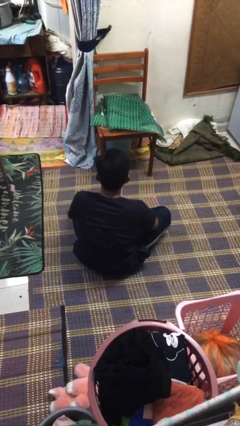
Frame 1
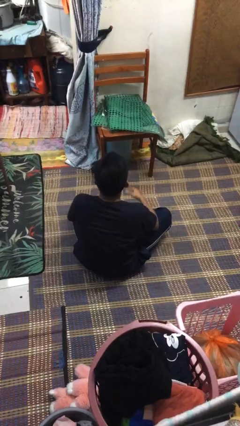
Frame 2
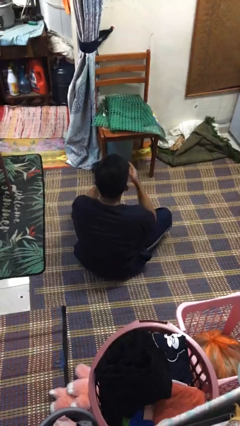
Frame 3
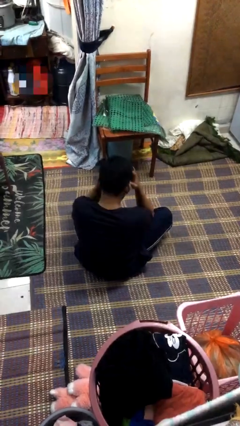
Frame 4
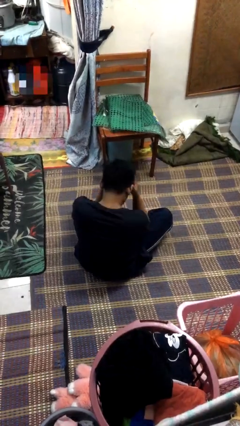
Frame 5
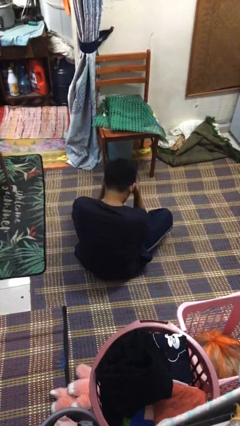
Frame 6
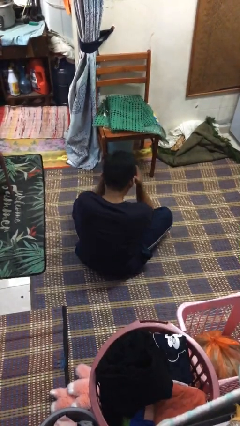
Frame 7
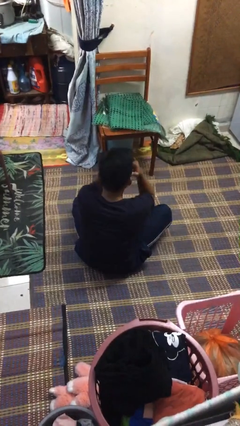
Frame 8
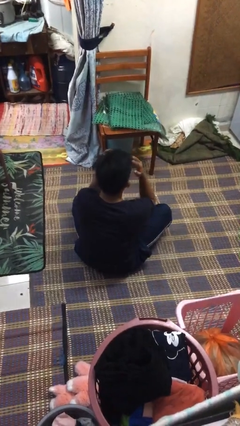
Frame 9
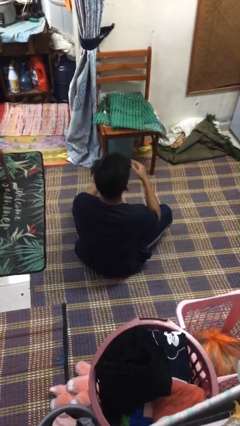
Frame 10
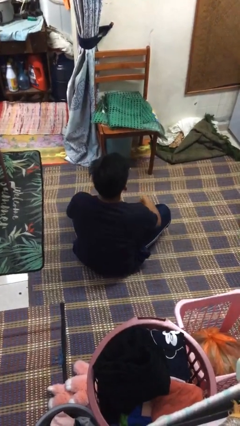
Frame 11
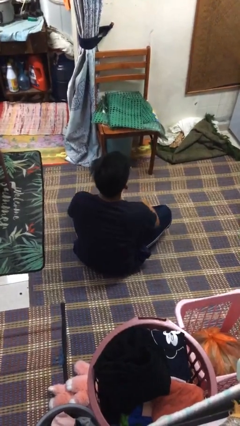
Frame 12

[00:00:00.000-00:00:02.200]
person covers face with hands

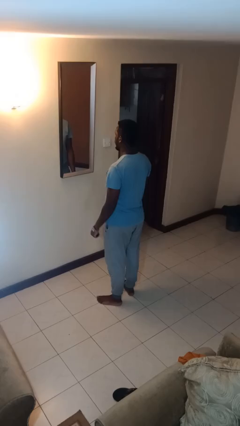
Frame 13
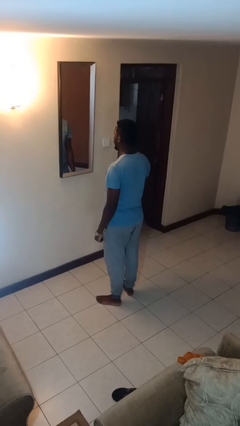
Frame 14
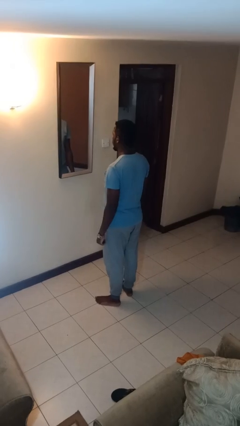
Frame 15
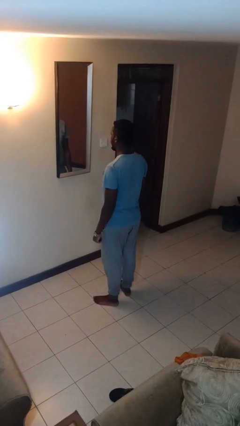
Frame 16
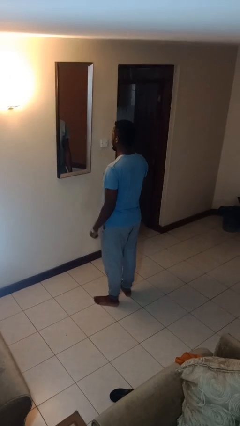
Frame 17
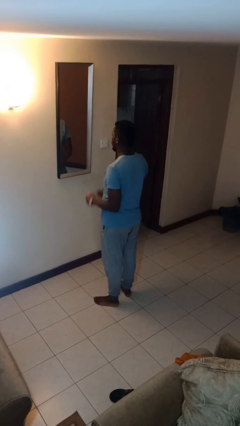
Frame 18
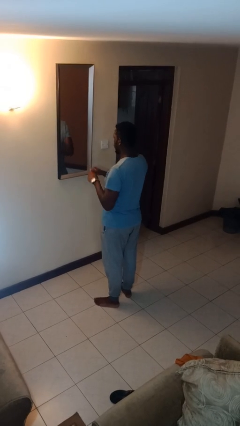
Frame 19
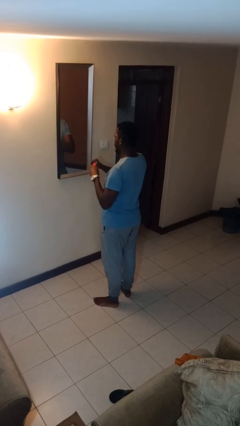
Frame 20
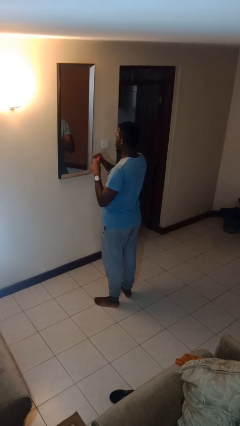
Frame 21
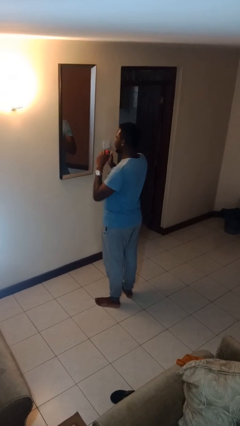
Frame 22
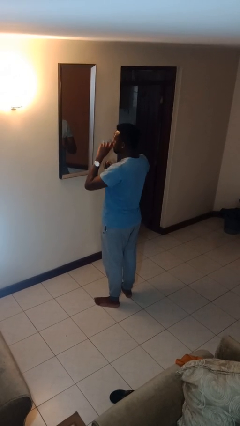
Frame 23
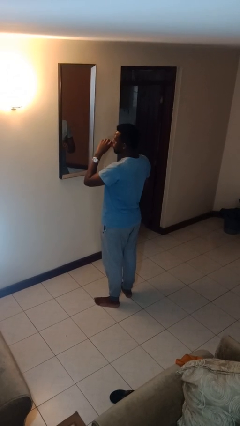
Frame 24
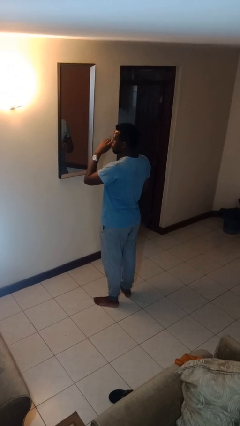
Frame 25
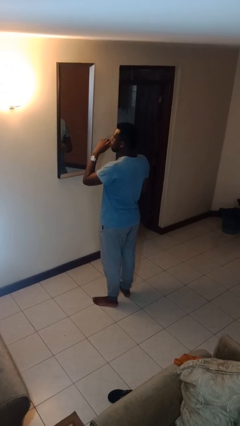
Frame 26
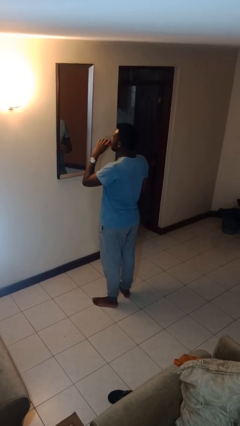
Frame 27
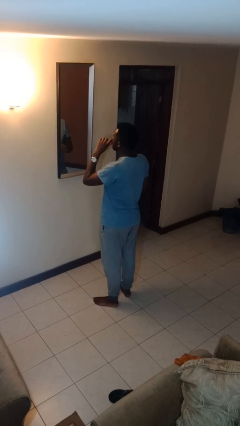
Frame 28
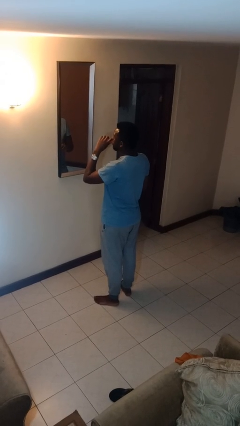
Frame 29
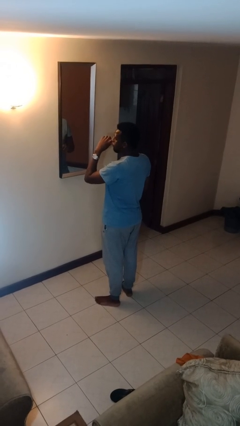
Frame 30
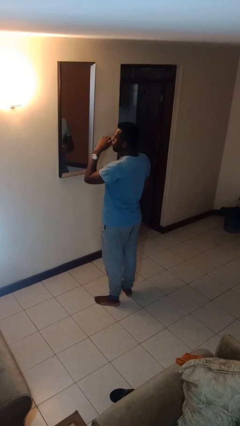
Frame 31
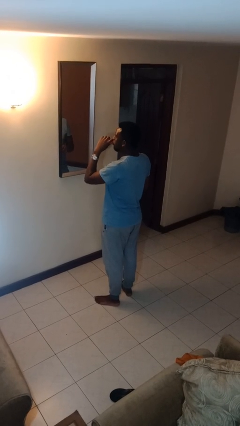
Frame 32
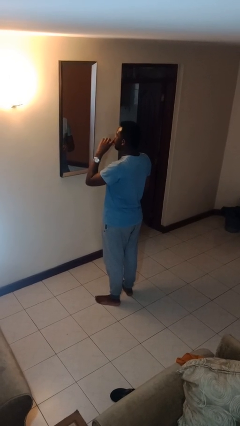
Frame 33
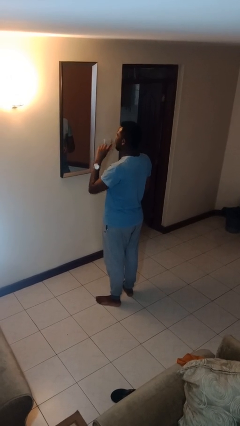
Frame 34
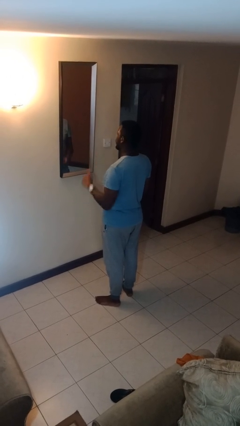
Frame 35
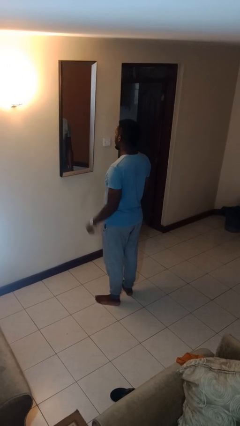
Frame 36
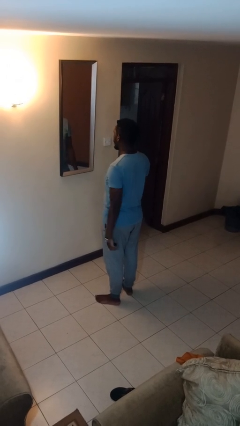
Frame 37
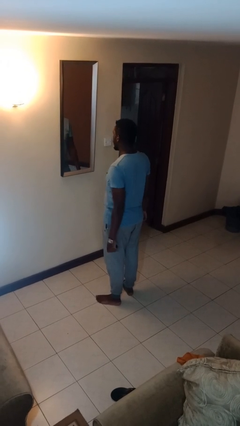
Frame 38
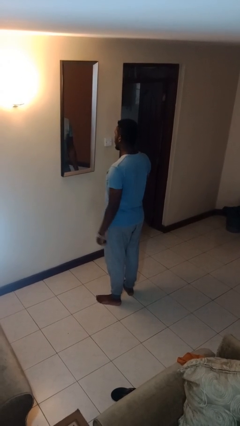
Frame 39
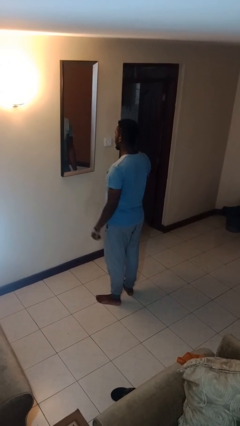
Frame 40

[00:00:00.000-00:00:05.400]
person applies lip makeup

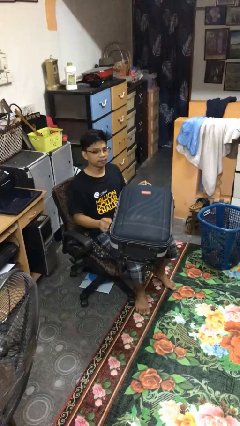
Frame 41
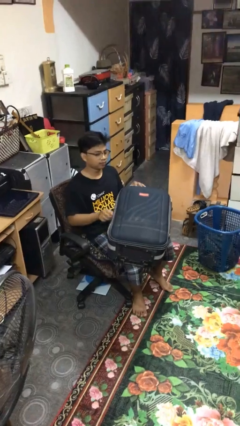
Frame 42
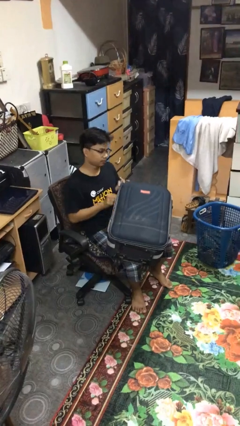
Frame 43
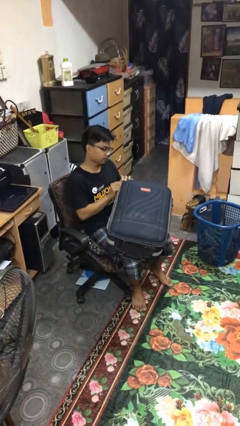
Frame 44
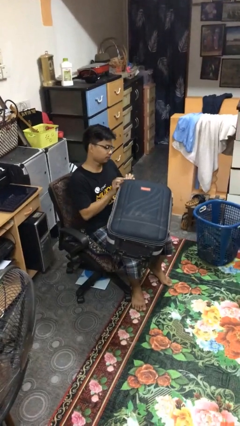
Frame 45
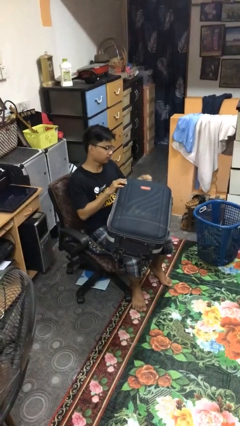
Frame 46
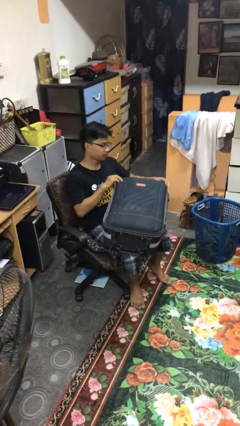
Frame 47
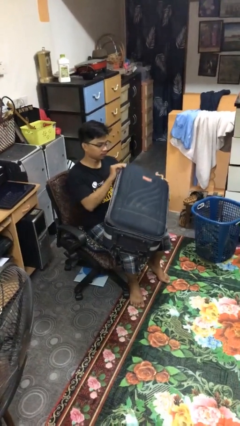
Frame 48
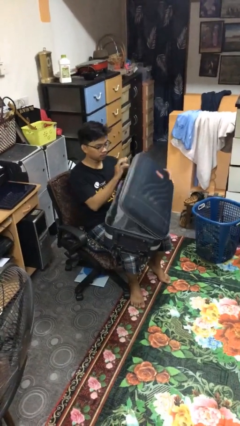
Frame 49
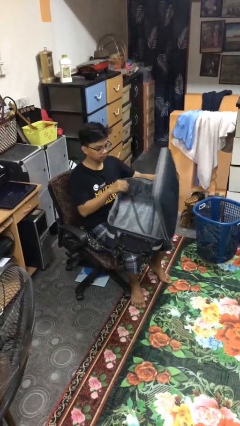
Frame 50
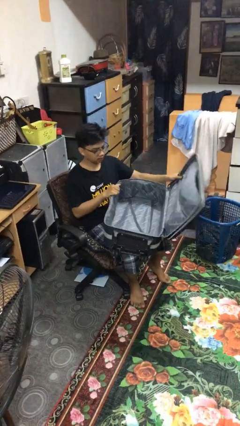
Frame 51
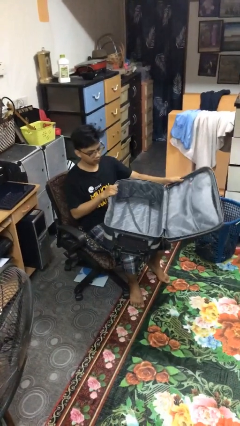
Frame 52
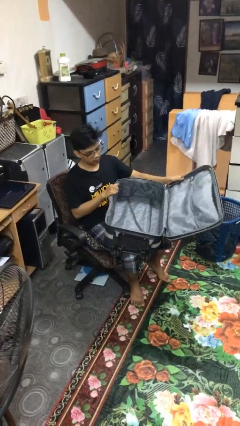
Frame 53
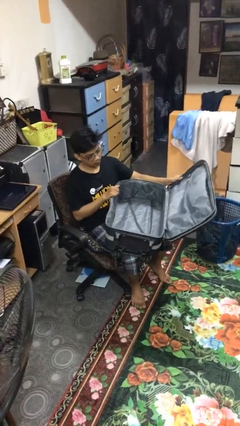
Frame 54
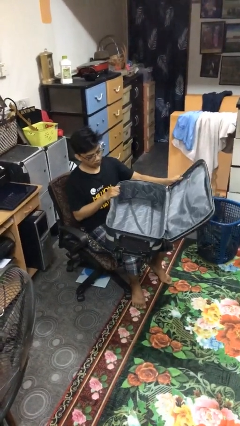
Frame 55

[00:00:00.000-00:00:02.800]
person opens suitcase

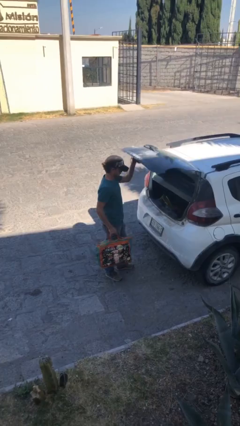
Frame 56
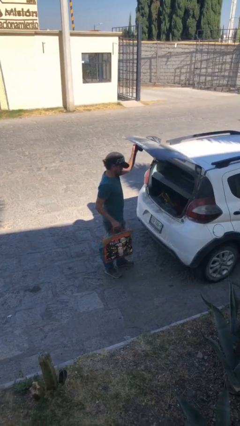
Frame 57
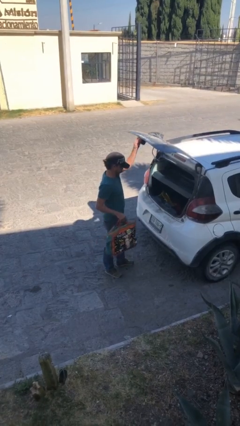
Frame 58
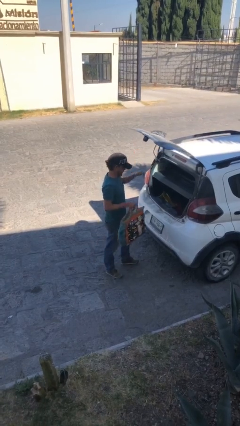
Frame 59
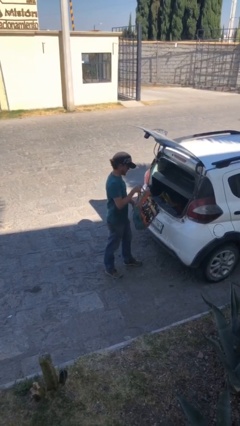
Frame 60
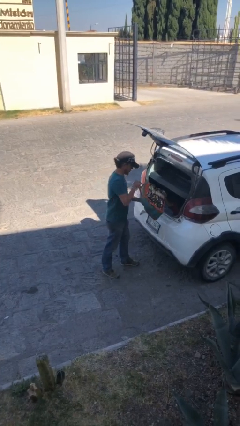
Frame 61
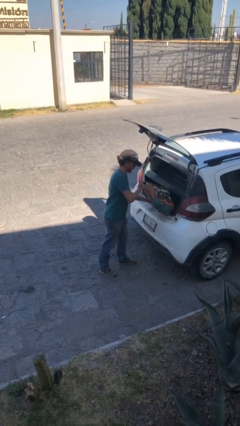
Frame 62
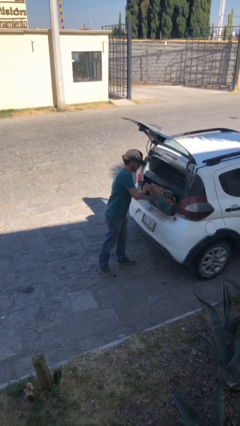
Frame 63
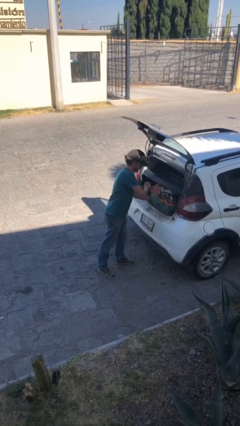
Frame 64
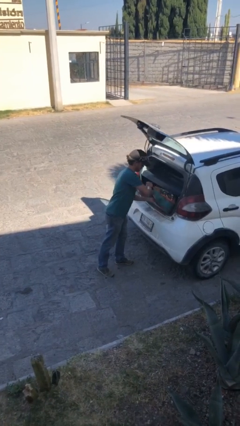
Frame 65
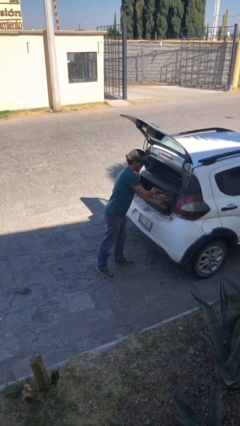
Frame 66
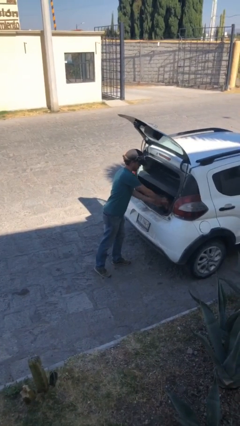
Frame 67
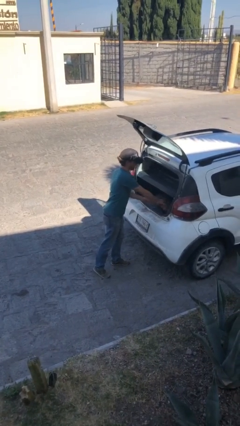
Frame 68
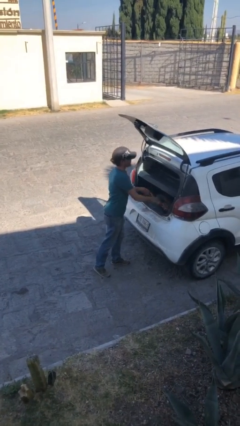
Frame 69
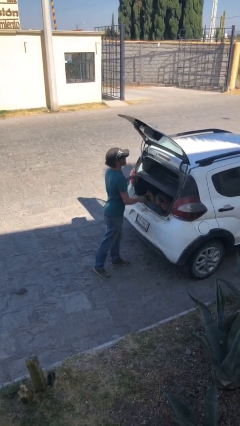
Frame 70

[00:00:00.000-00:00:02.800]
person loads car

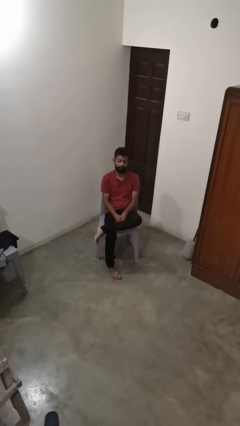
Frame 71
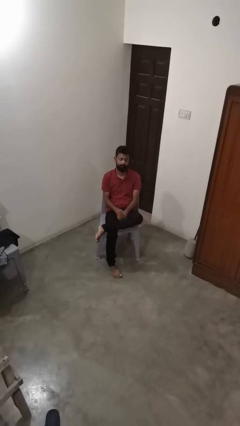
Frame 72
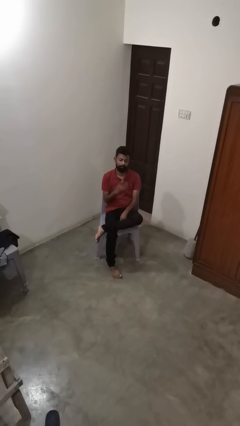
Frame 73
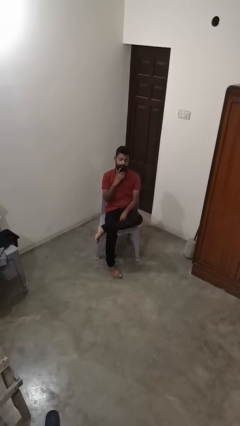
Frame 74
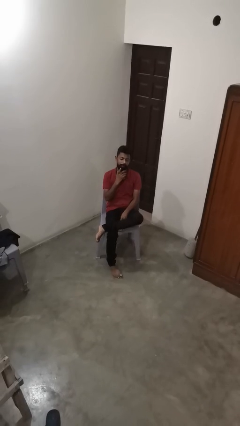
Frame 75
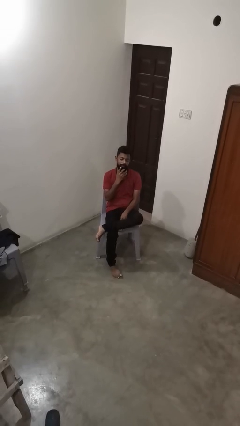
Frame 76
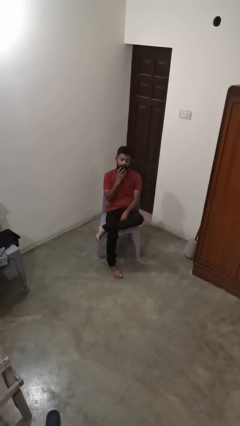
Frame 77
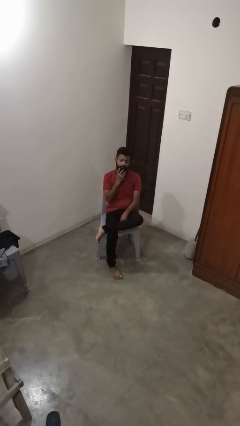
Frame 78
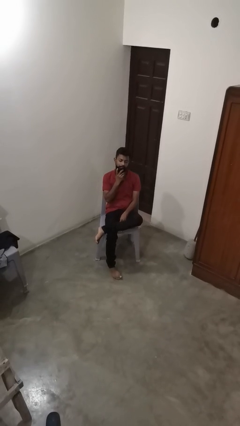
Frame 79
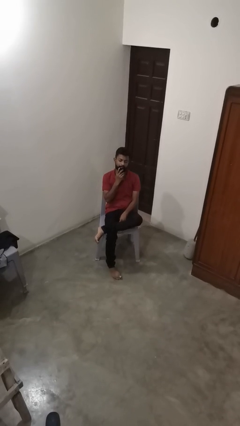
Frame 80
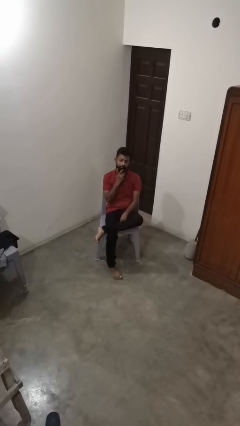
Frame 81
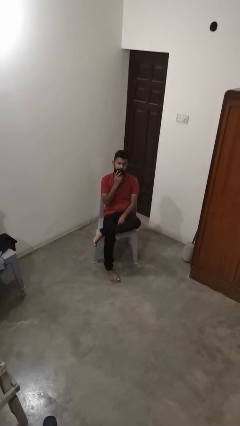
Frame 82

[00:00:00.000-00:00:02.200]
person strokes chin

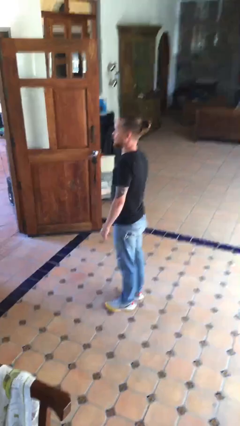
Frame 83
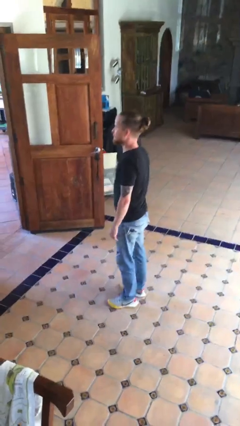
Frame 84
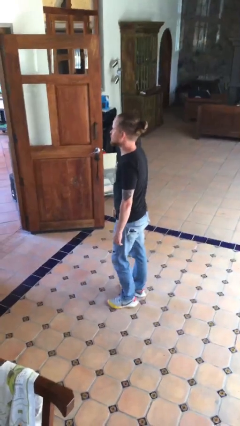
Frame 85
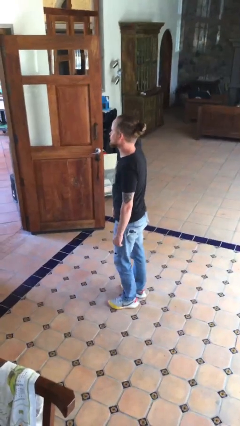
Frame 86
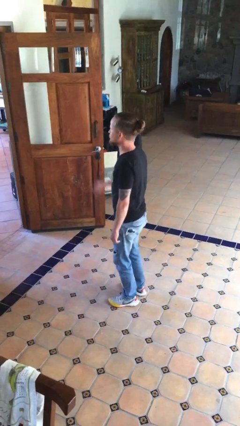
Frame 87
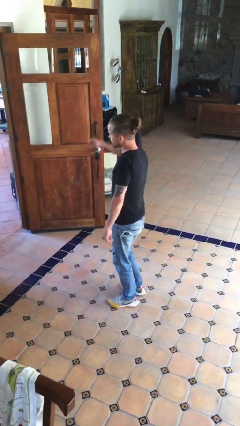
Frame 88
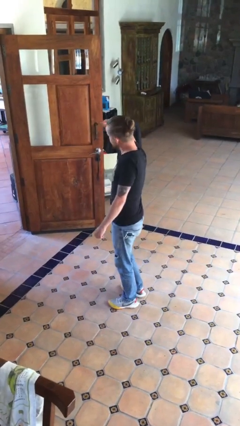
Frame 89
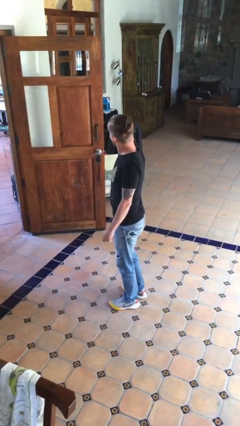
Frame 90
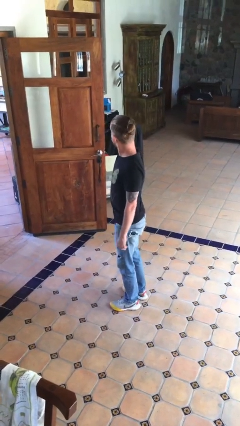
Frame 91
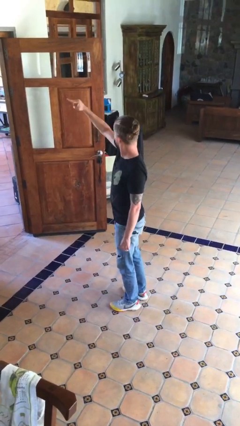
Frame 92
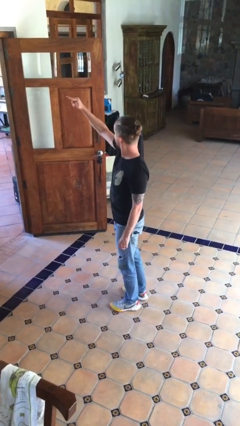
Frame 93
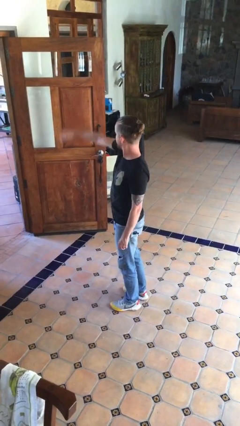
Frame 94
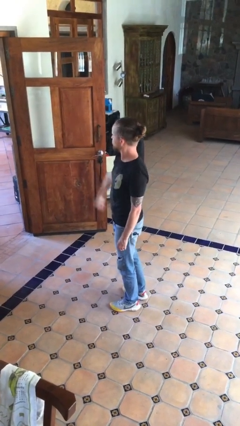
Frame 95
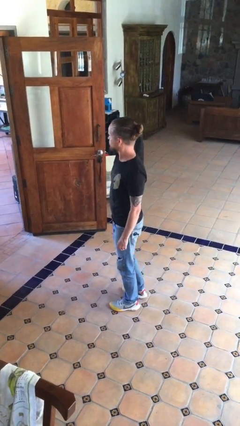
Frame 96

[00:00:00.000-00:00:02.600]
person salutes
